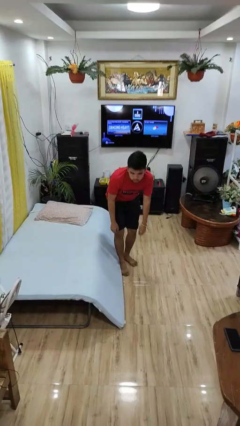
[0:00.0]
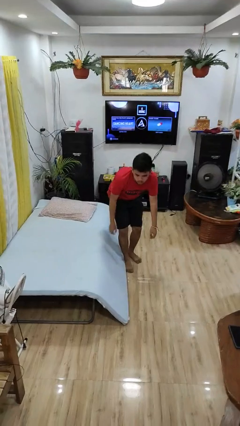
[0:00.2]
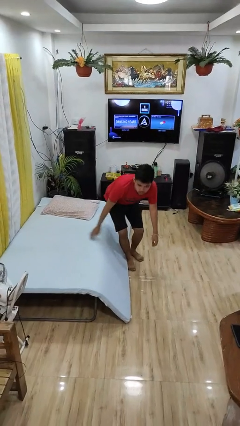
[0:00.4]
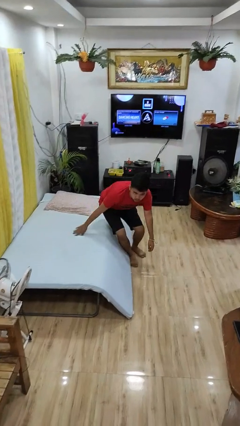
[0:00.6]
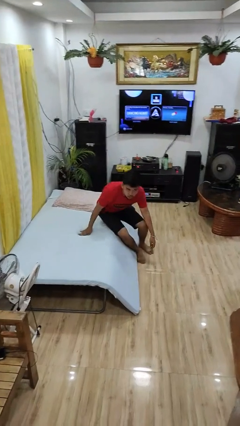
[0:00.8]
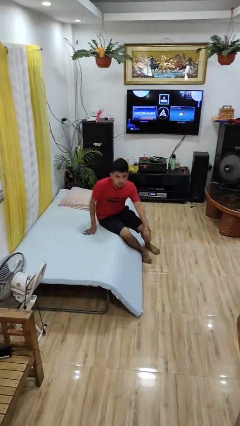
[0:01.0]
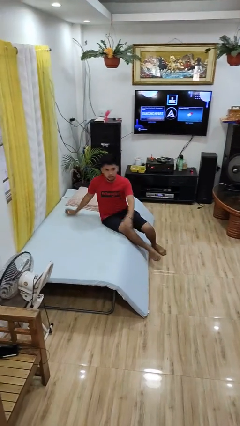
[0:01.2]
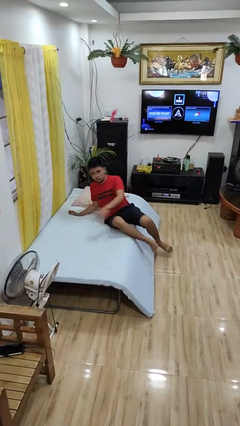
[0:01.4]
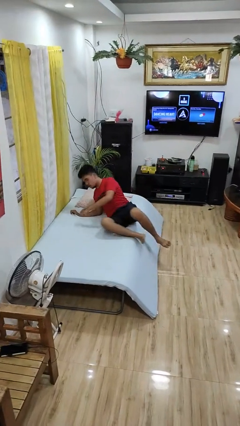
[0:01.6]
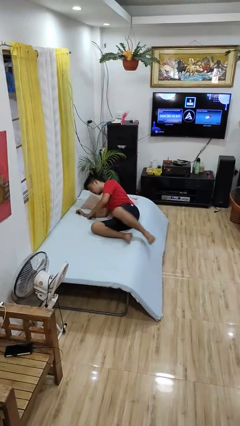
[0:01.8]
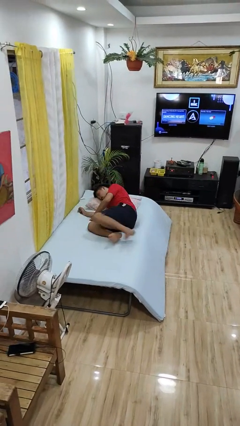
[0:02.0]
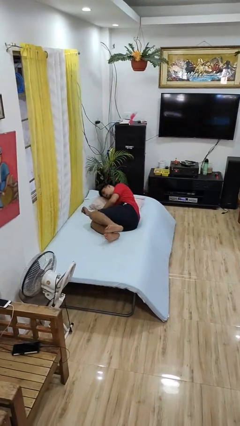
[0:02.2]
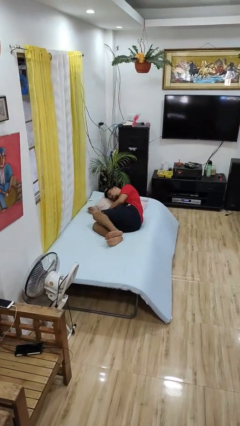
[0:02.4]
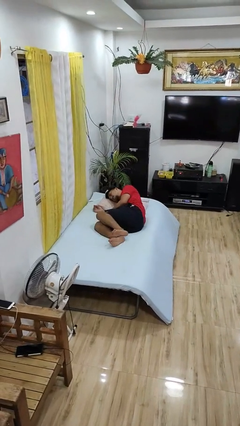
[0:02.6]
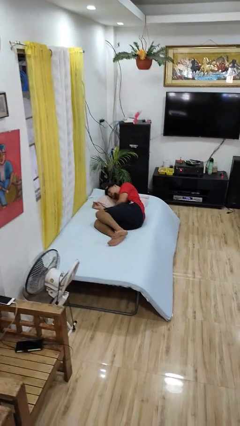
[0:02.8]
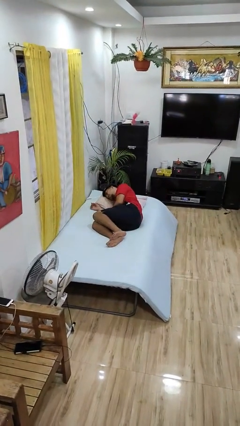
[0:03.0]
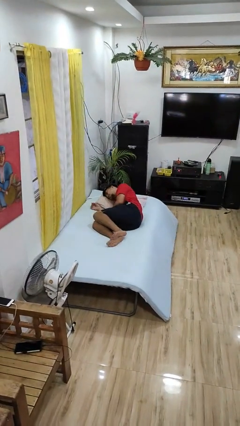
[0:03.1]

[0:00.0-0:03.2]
person lies down on bed

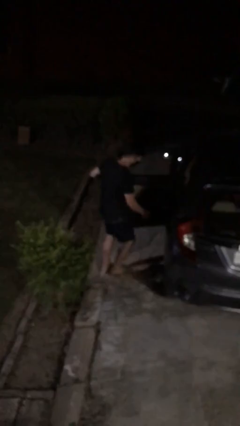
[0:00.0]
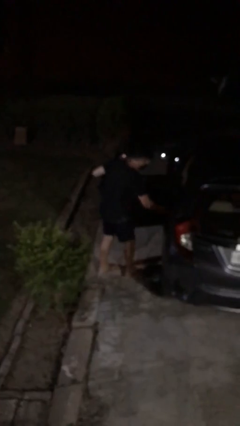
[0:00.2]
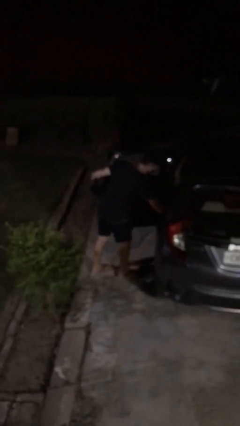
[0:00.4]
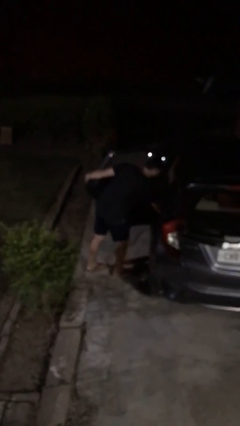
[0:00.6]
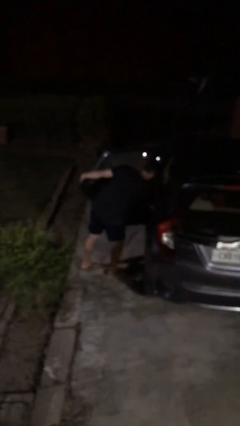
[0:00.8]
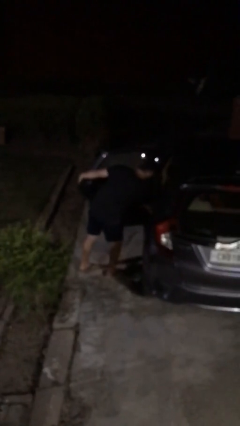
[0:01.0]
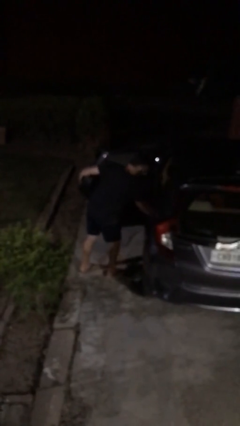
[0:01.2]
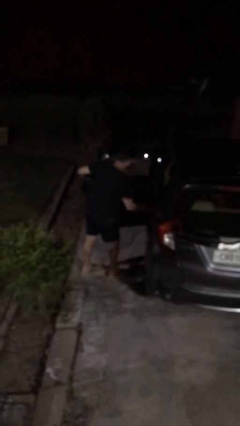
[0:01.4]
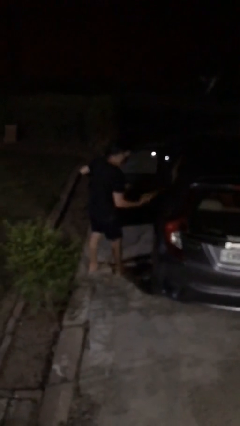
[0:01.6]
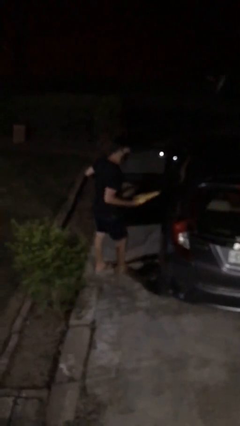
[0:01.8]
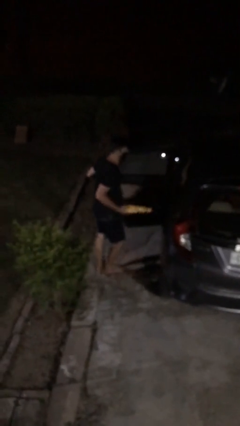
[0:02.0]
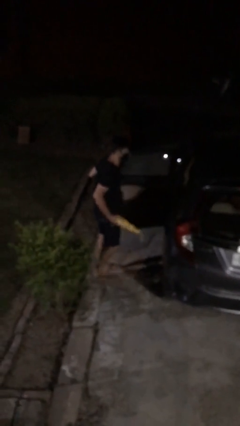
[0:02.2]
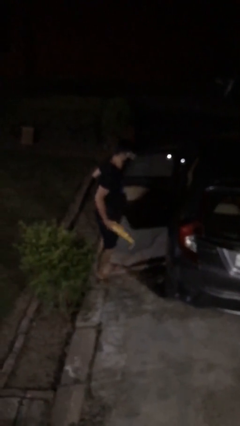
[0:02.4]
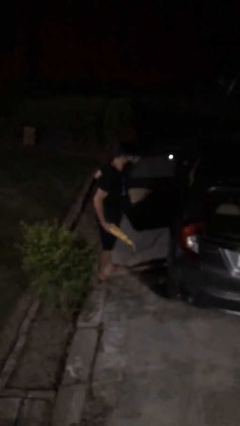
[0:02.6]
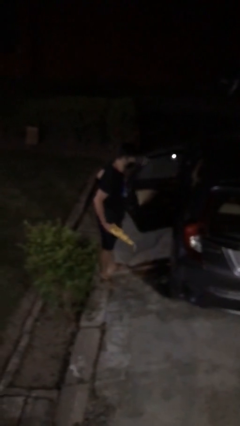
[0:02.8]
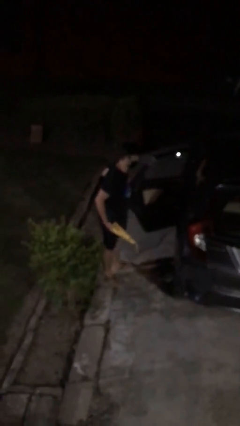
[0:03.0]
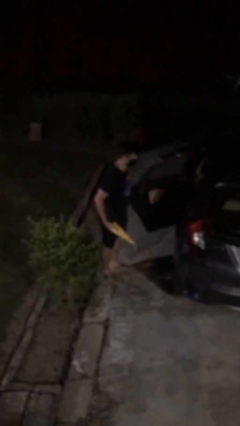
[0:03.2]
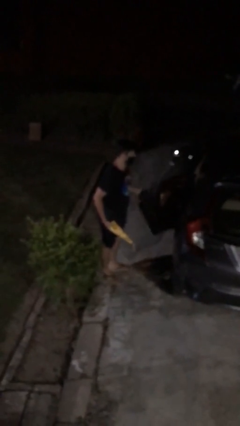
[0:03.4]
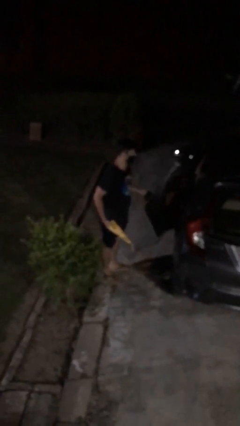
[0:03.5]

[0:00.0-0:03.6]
person unloads car

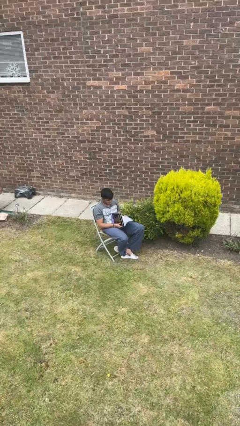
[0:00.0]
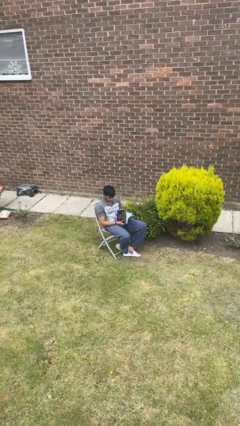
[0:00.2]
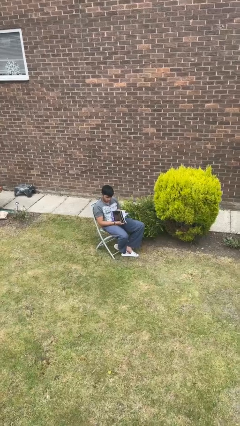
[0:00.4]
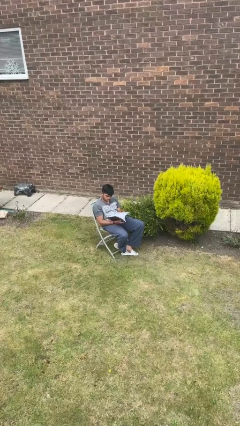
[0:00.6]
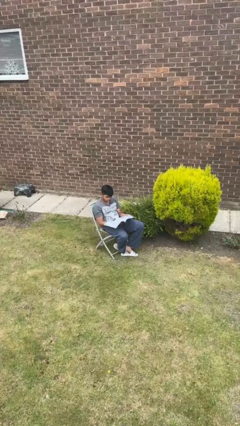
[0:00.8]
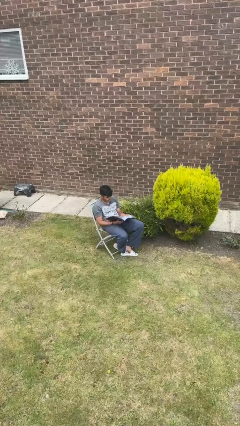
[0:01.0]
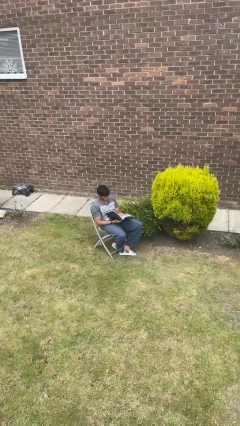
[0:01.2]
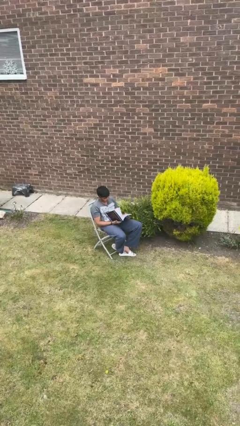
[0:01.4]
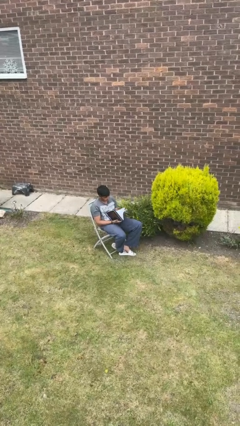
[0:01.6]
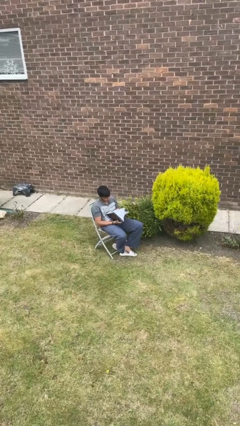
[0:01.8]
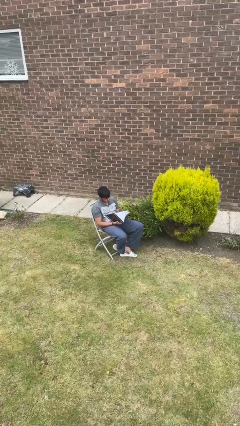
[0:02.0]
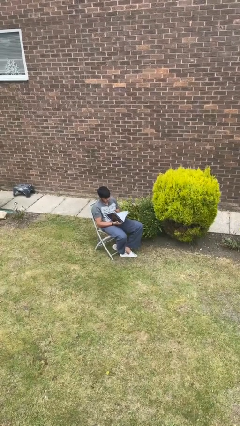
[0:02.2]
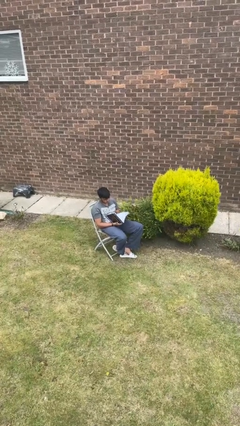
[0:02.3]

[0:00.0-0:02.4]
person reads magazine

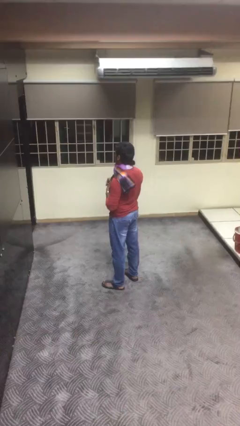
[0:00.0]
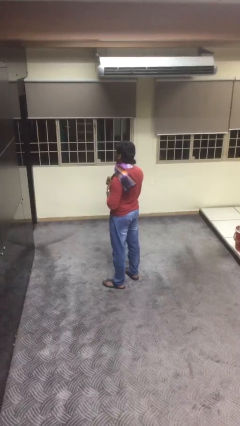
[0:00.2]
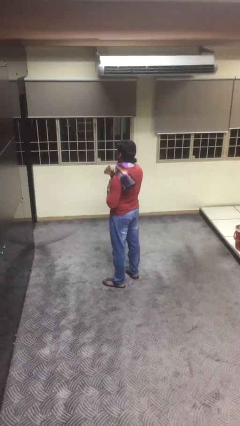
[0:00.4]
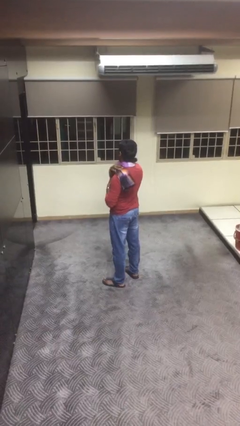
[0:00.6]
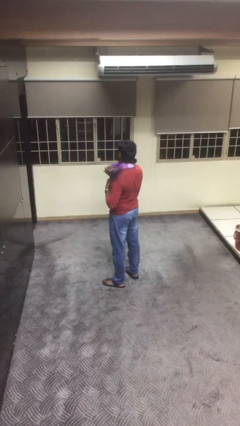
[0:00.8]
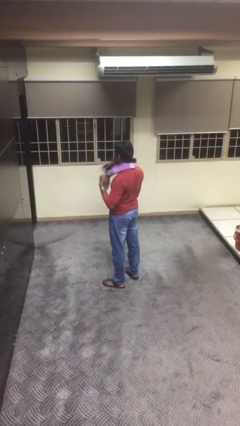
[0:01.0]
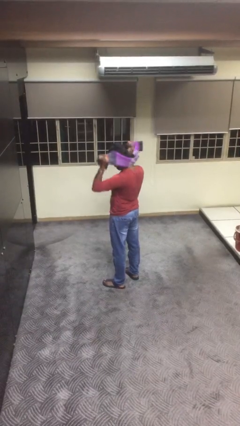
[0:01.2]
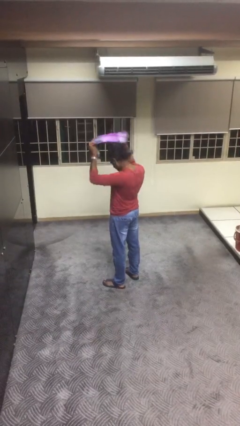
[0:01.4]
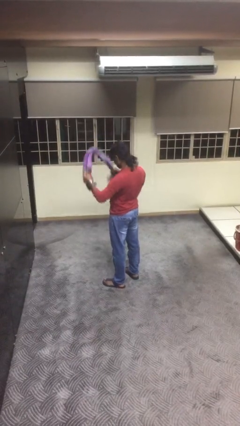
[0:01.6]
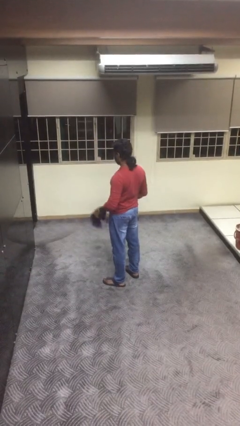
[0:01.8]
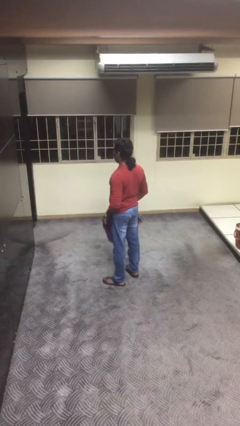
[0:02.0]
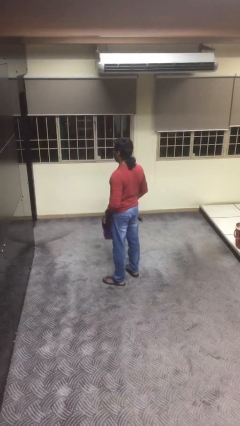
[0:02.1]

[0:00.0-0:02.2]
person takes off scarf

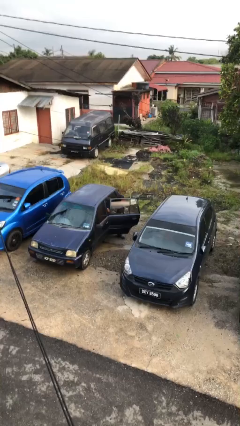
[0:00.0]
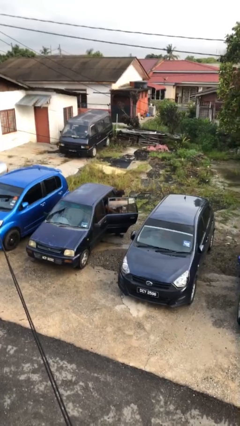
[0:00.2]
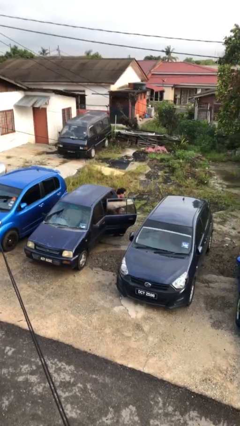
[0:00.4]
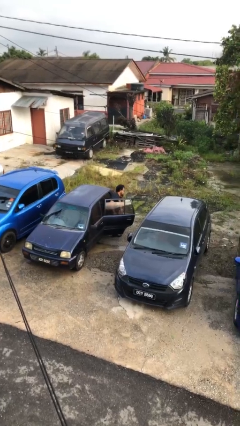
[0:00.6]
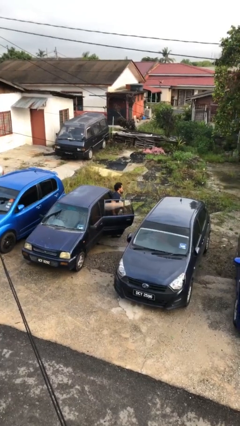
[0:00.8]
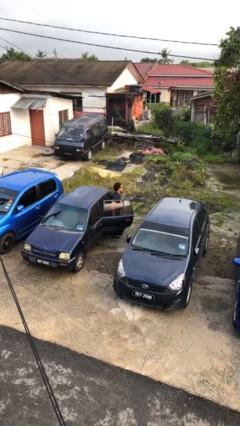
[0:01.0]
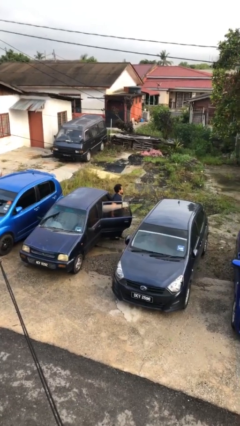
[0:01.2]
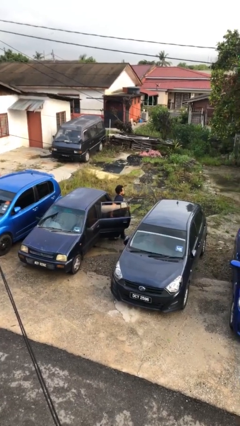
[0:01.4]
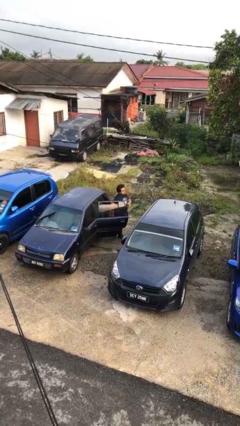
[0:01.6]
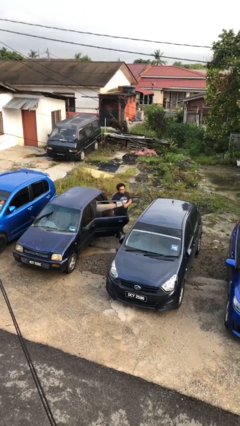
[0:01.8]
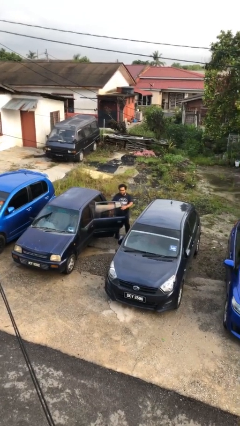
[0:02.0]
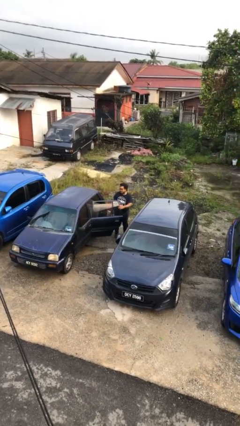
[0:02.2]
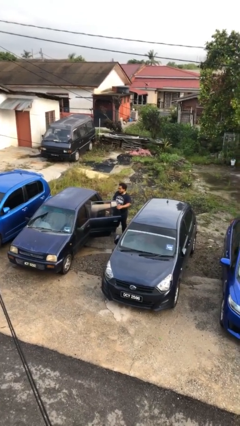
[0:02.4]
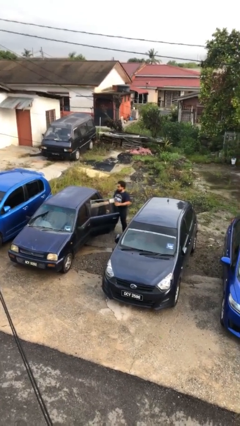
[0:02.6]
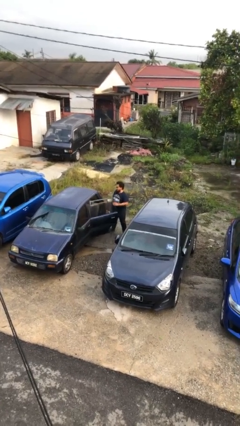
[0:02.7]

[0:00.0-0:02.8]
person exits car

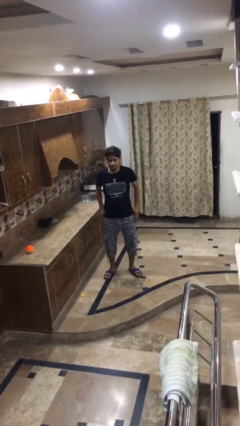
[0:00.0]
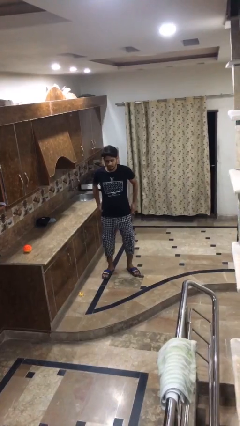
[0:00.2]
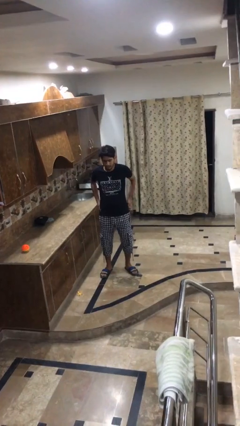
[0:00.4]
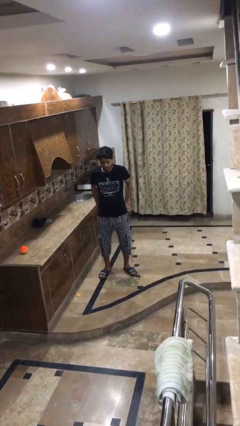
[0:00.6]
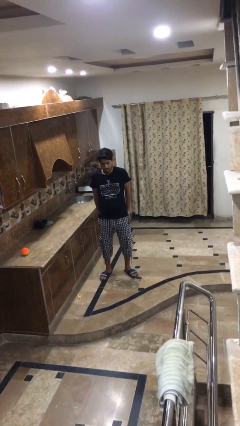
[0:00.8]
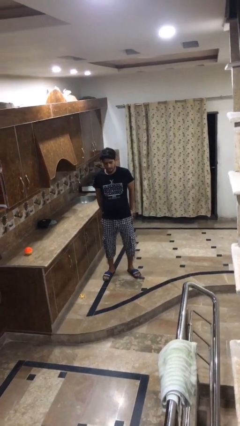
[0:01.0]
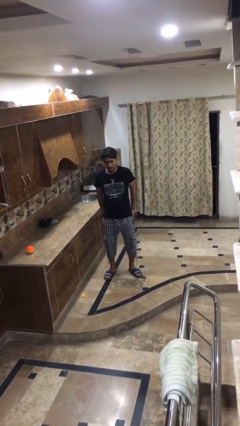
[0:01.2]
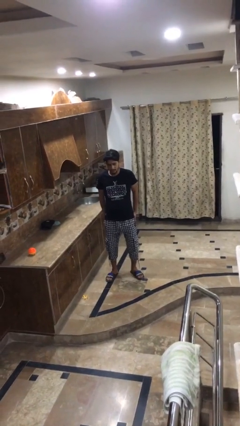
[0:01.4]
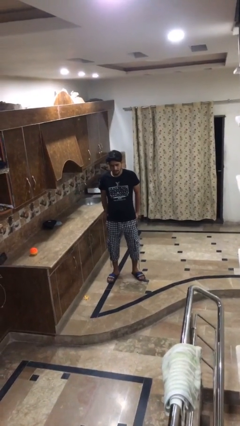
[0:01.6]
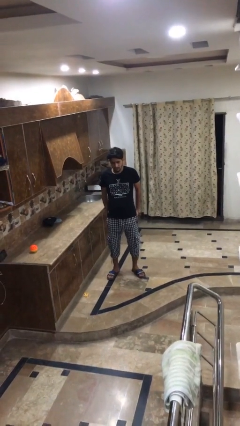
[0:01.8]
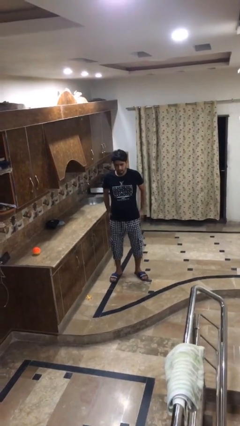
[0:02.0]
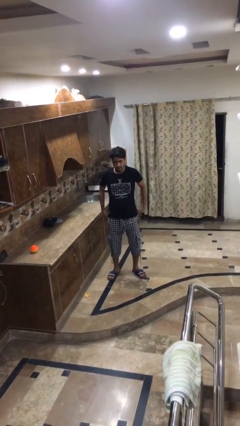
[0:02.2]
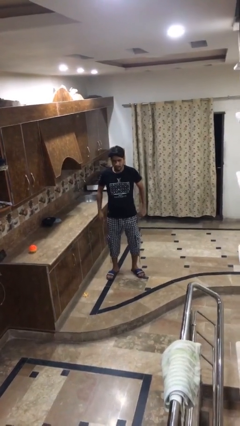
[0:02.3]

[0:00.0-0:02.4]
person puts hands in back pockets

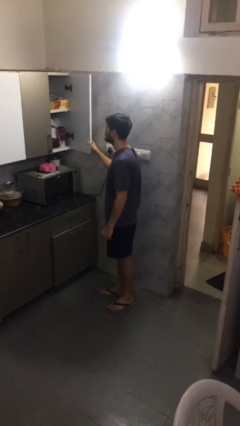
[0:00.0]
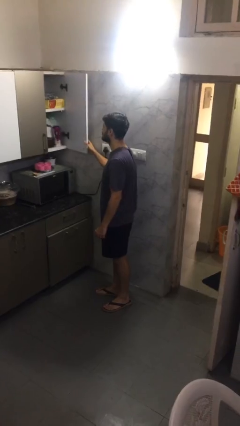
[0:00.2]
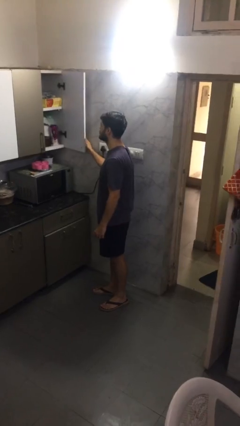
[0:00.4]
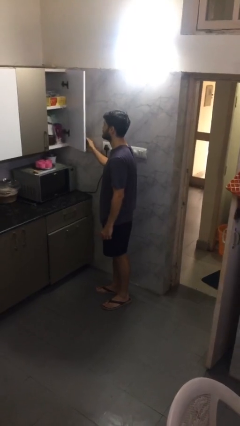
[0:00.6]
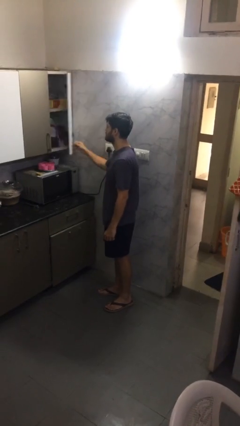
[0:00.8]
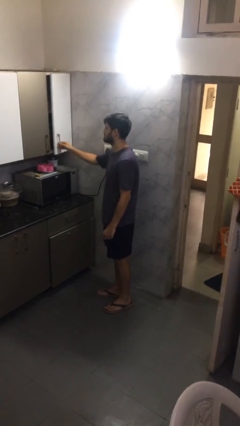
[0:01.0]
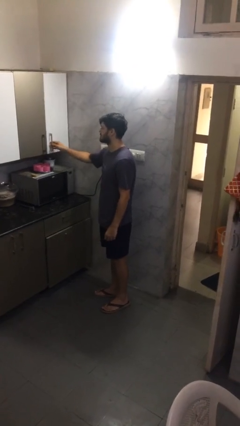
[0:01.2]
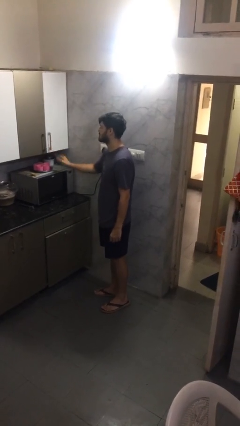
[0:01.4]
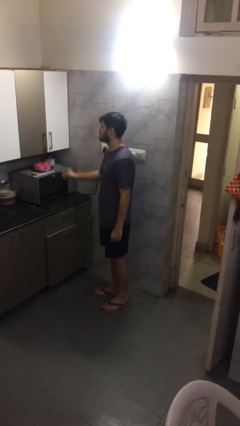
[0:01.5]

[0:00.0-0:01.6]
person closes cabinet
